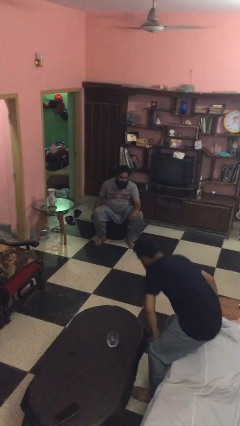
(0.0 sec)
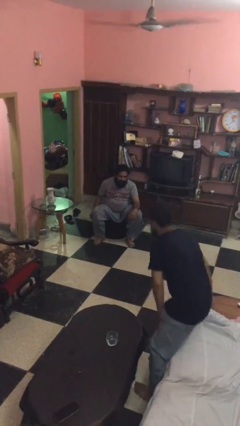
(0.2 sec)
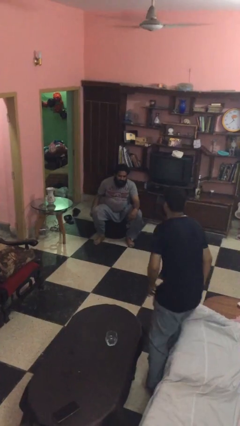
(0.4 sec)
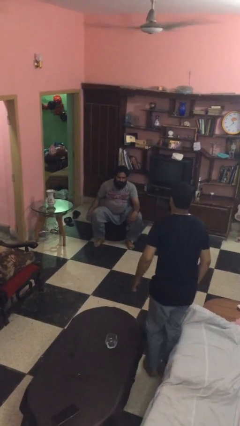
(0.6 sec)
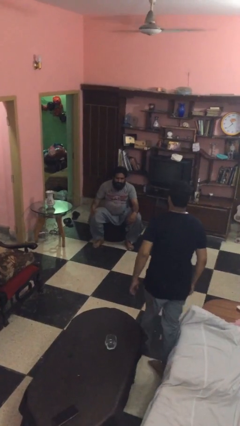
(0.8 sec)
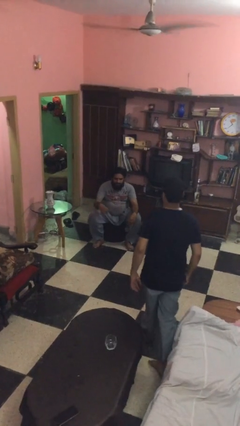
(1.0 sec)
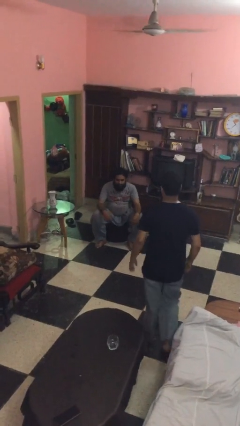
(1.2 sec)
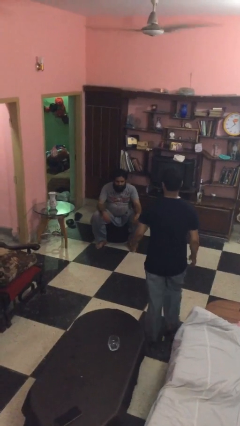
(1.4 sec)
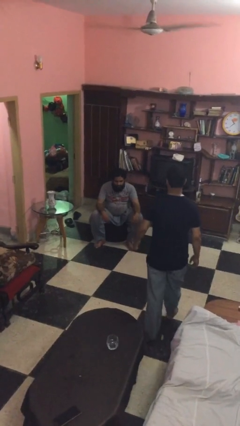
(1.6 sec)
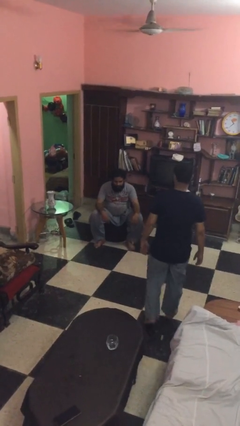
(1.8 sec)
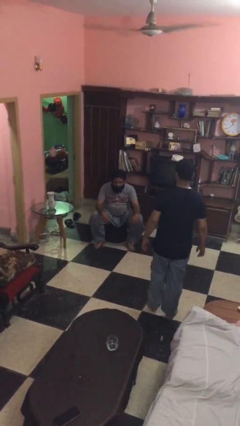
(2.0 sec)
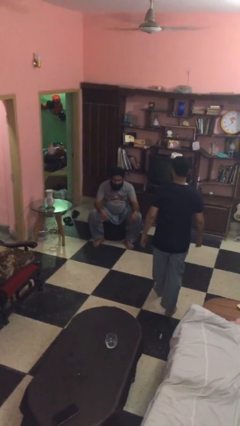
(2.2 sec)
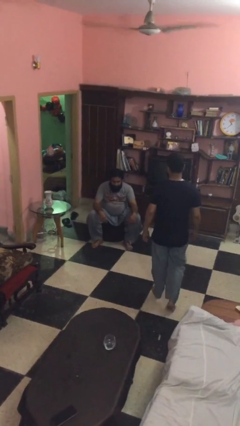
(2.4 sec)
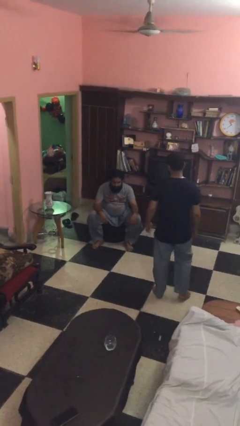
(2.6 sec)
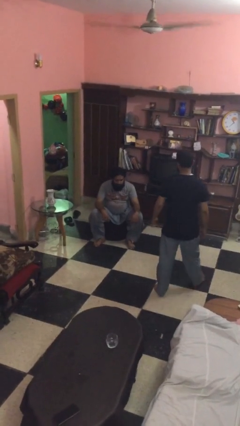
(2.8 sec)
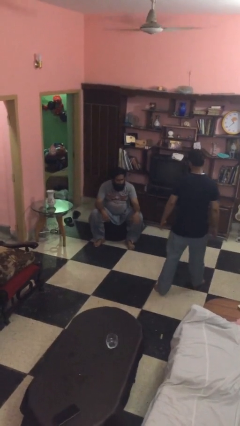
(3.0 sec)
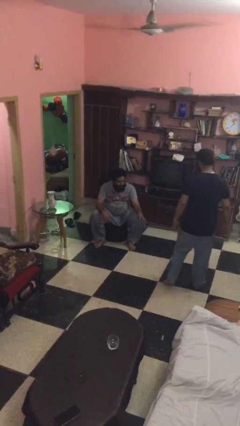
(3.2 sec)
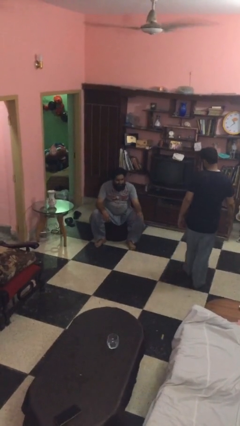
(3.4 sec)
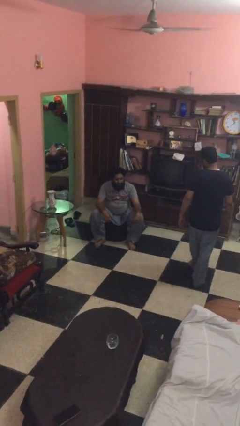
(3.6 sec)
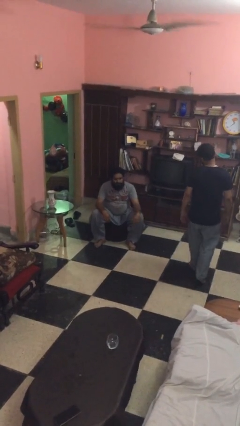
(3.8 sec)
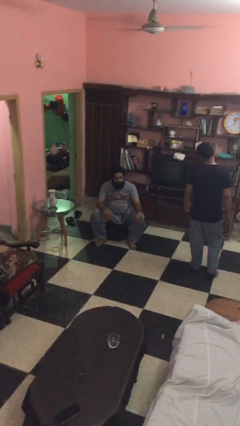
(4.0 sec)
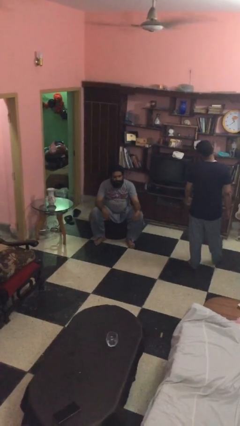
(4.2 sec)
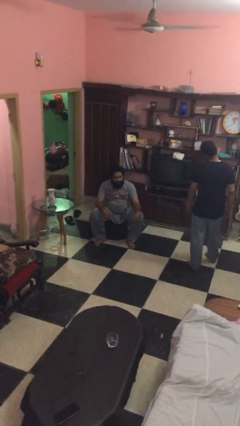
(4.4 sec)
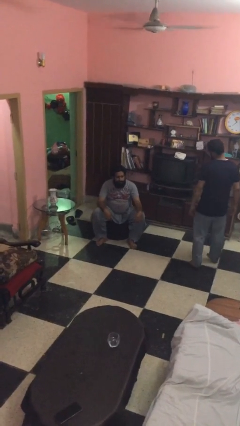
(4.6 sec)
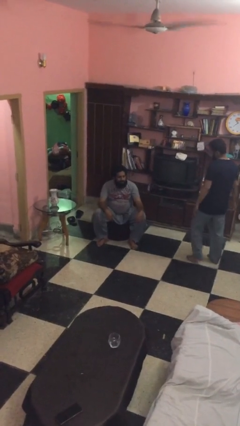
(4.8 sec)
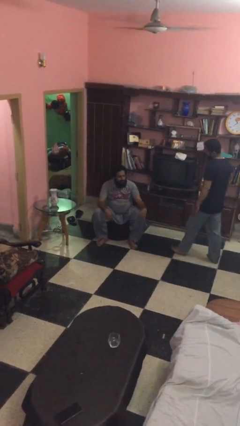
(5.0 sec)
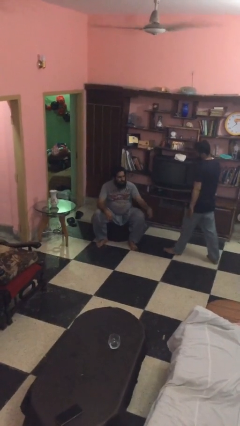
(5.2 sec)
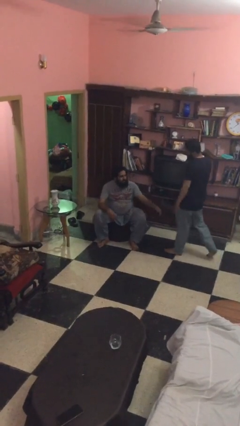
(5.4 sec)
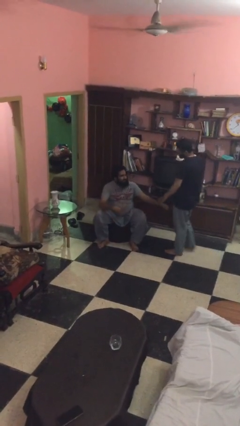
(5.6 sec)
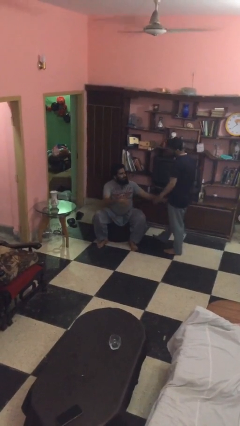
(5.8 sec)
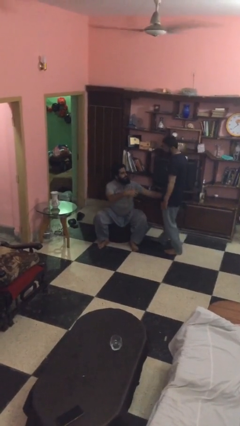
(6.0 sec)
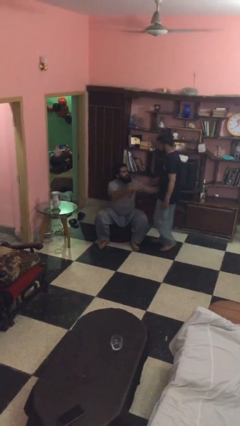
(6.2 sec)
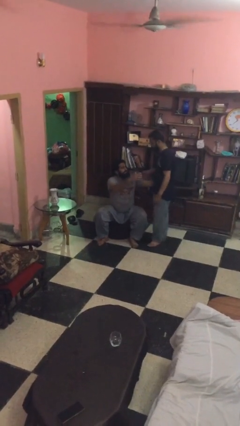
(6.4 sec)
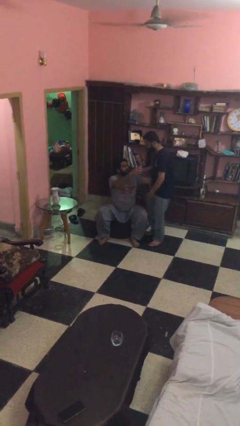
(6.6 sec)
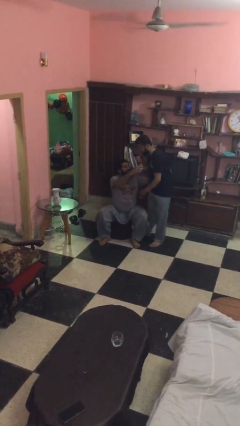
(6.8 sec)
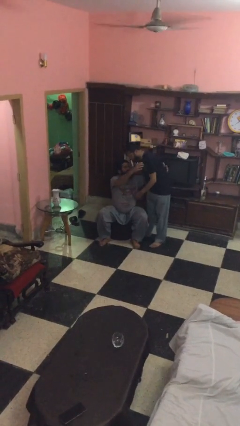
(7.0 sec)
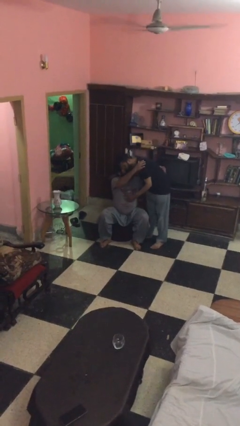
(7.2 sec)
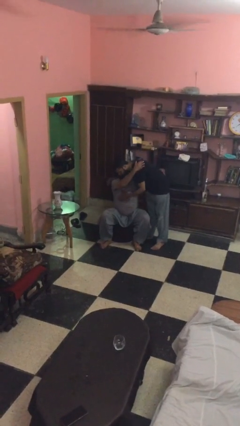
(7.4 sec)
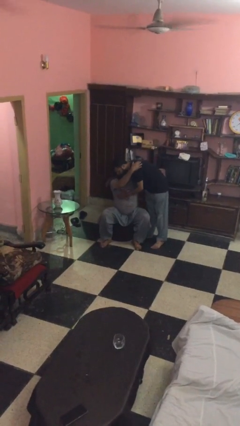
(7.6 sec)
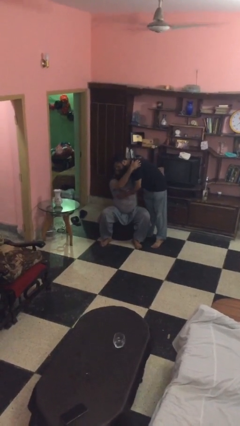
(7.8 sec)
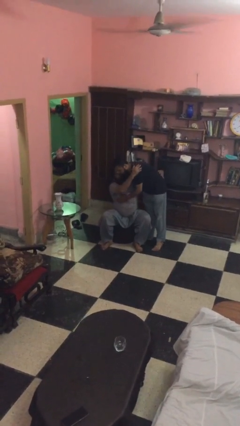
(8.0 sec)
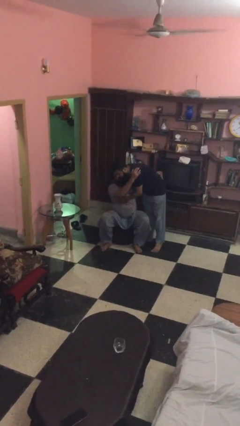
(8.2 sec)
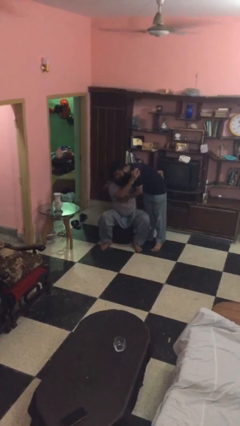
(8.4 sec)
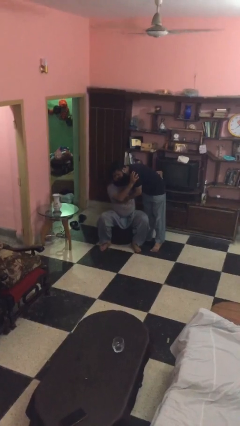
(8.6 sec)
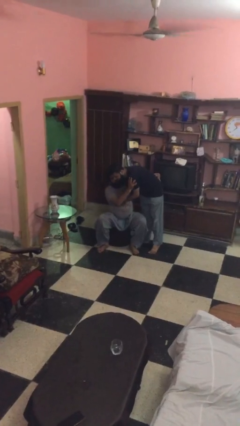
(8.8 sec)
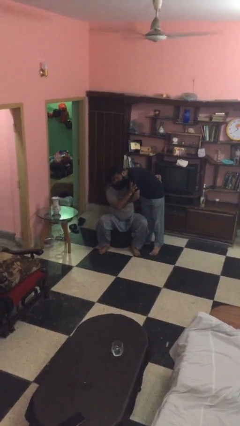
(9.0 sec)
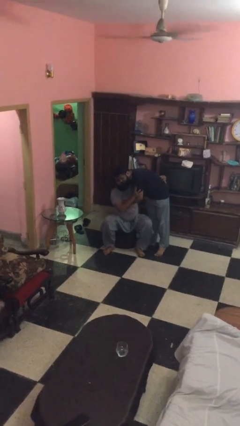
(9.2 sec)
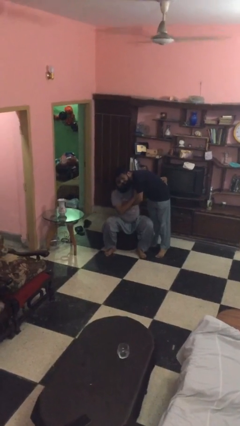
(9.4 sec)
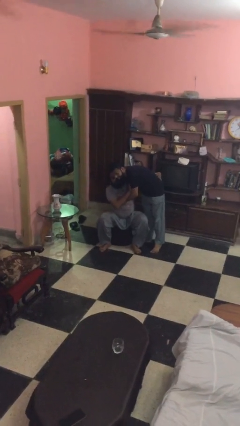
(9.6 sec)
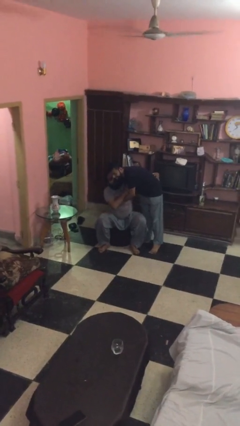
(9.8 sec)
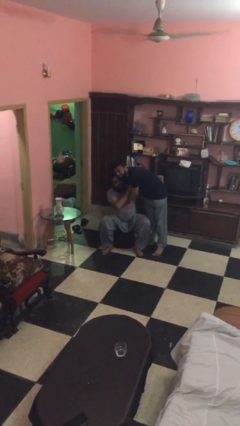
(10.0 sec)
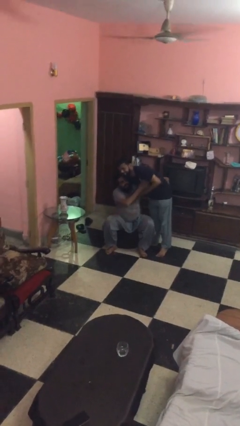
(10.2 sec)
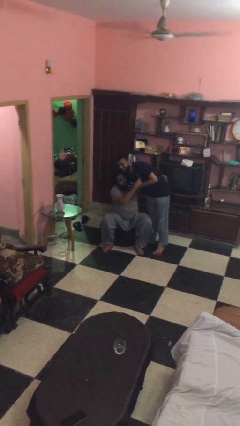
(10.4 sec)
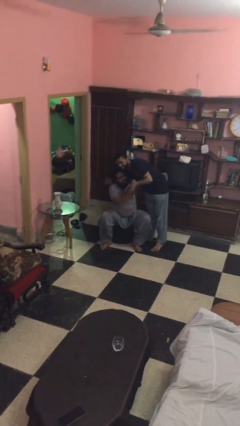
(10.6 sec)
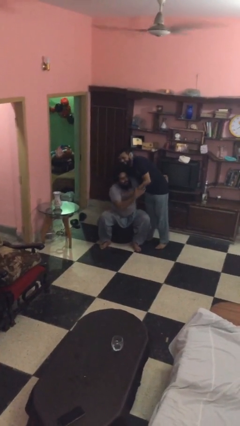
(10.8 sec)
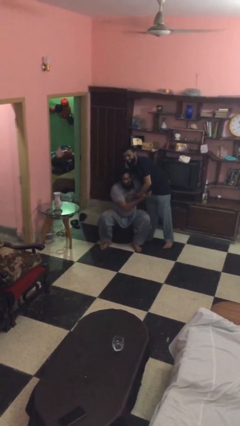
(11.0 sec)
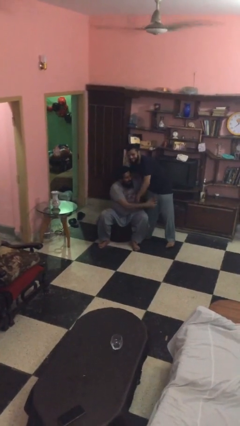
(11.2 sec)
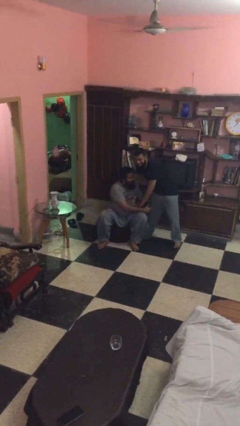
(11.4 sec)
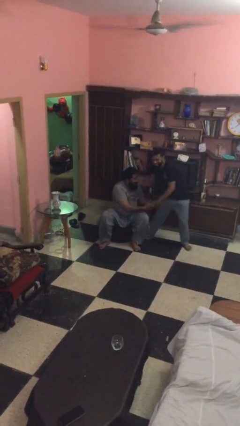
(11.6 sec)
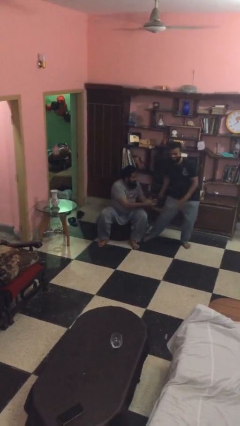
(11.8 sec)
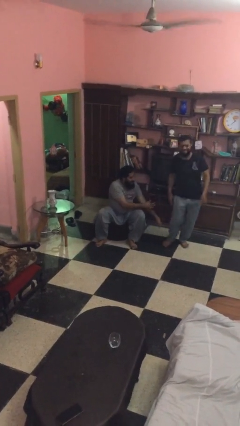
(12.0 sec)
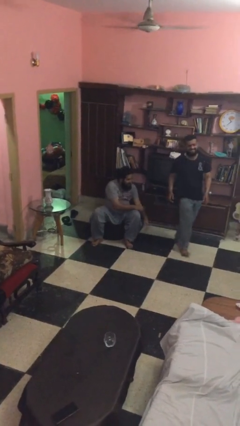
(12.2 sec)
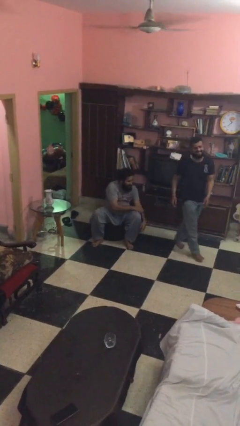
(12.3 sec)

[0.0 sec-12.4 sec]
person embraces person

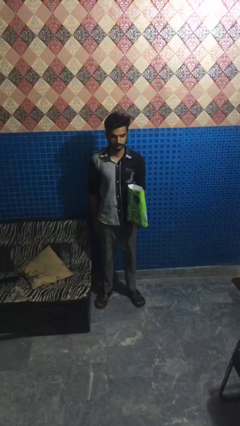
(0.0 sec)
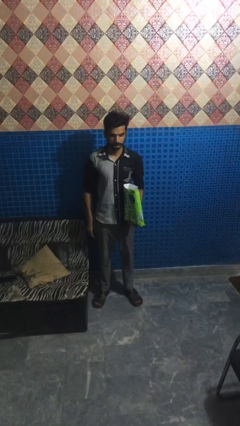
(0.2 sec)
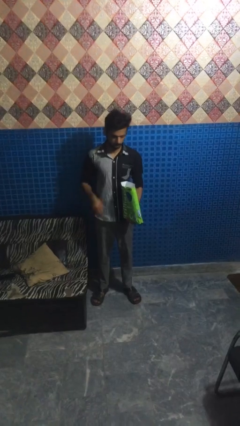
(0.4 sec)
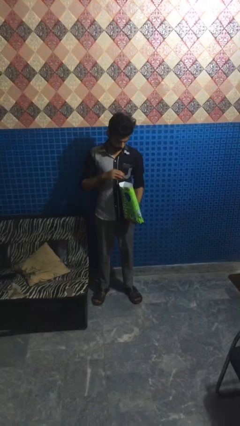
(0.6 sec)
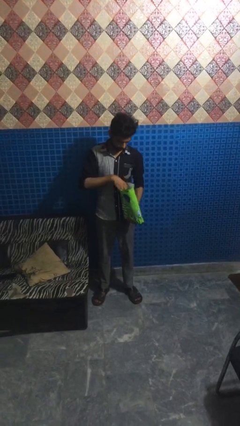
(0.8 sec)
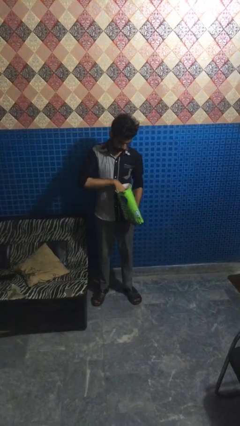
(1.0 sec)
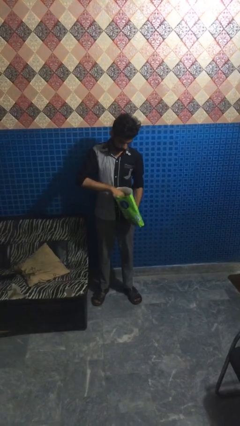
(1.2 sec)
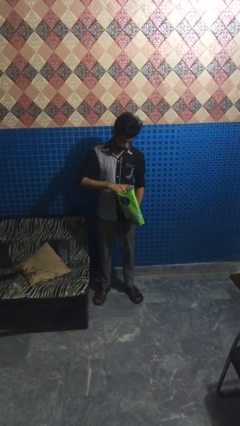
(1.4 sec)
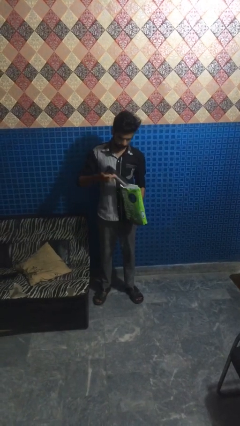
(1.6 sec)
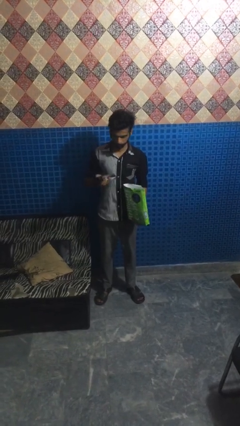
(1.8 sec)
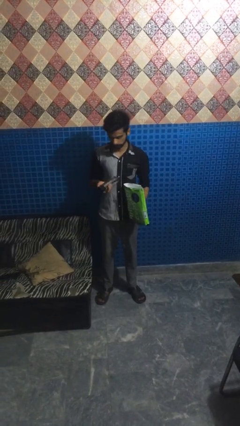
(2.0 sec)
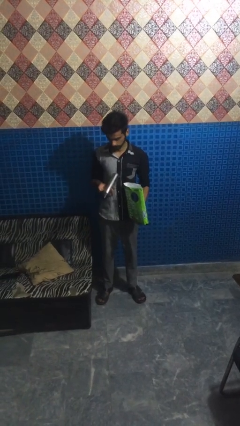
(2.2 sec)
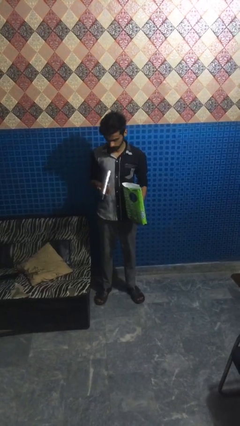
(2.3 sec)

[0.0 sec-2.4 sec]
person takes object from bag

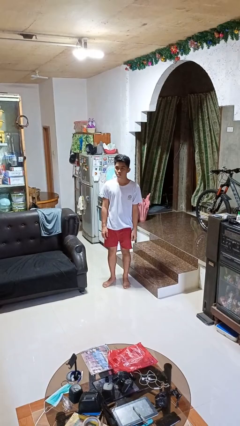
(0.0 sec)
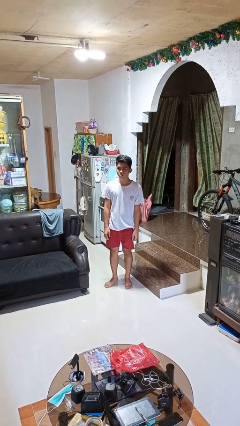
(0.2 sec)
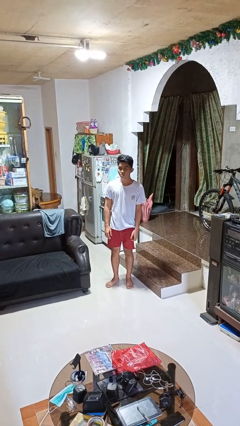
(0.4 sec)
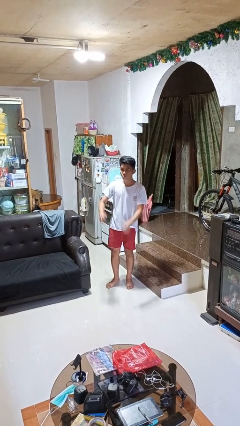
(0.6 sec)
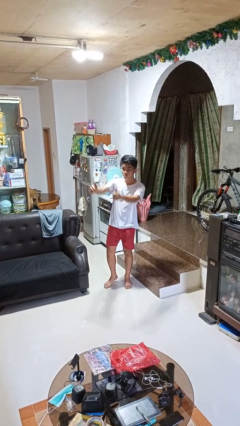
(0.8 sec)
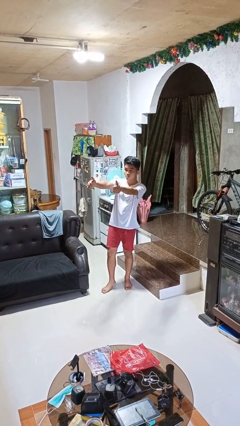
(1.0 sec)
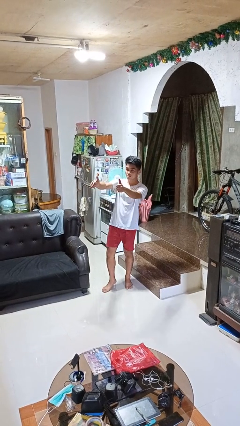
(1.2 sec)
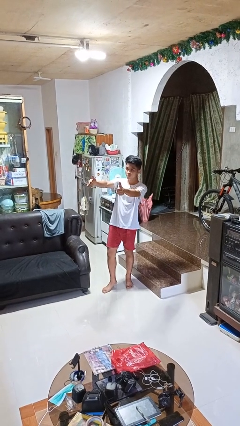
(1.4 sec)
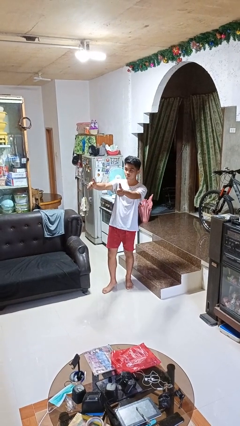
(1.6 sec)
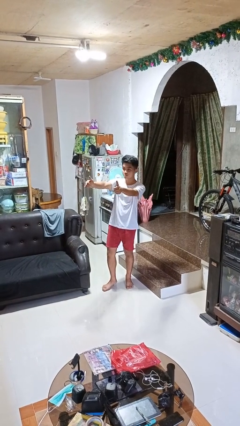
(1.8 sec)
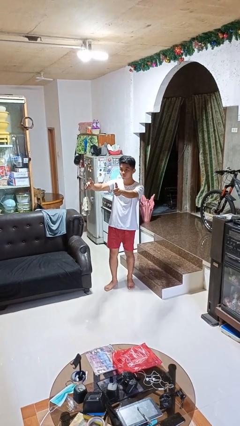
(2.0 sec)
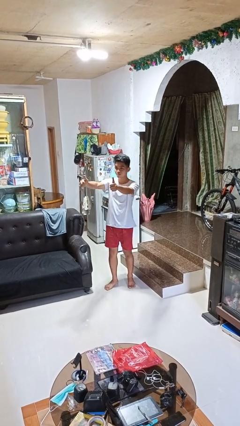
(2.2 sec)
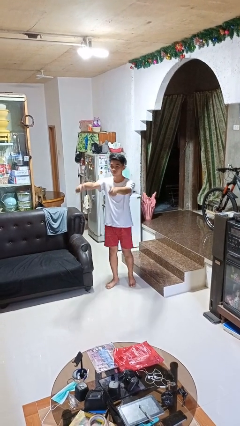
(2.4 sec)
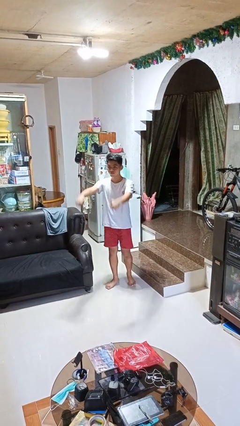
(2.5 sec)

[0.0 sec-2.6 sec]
person gestures thumbs up

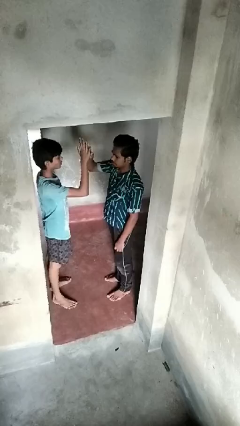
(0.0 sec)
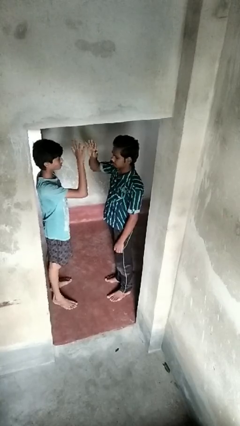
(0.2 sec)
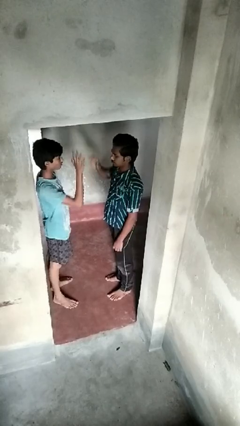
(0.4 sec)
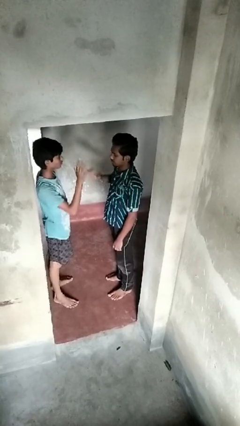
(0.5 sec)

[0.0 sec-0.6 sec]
person highfives hand
